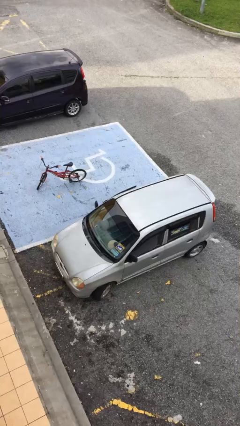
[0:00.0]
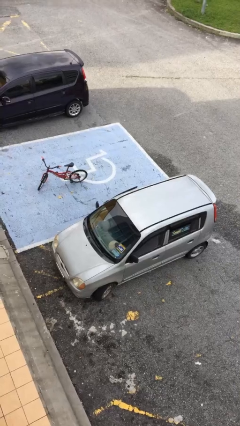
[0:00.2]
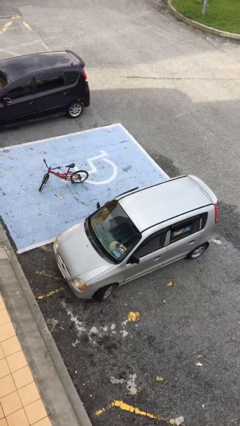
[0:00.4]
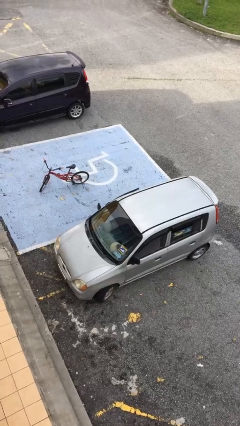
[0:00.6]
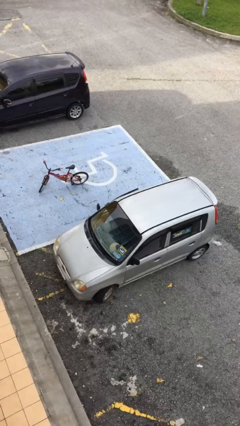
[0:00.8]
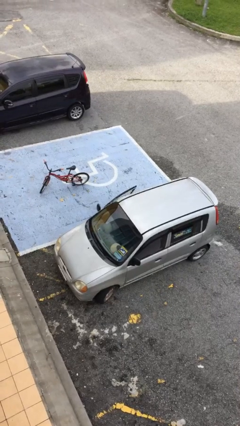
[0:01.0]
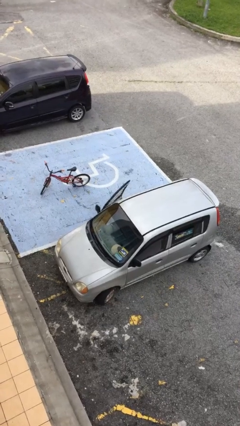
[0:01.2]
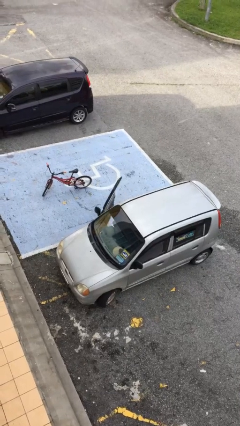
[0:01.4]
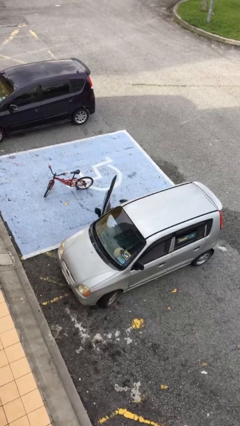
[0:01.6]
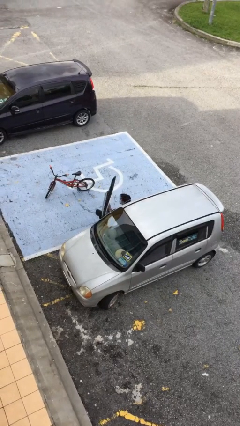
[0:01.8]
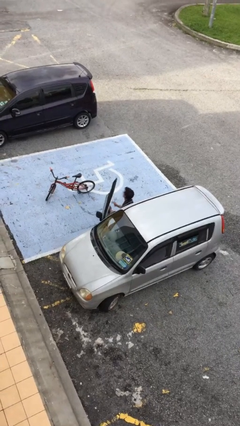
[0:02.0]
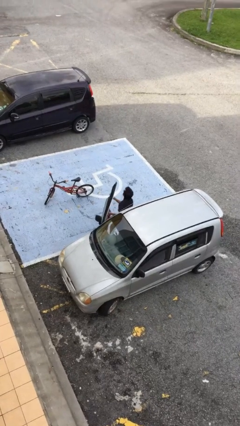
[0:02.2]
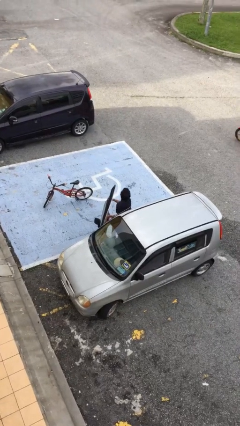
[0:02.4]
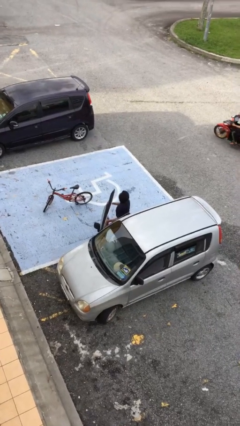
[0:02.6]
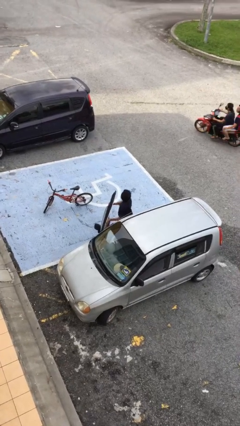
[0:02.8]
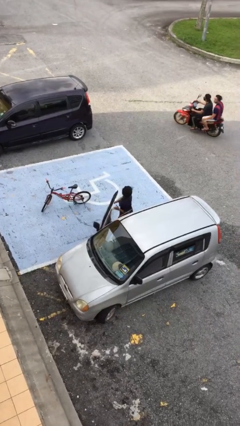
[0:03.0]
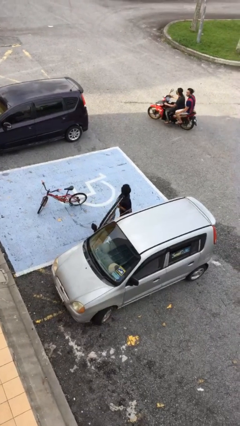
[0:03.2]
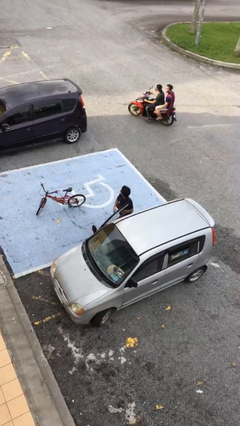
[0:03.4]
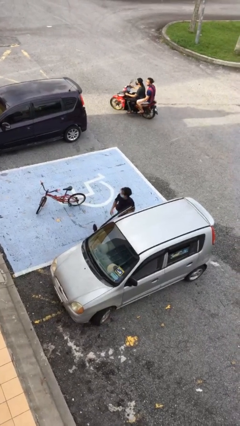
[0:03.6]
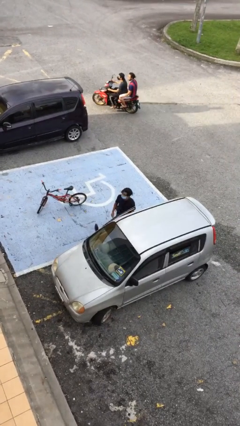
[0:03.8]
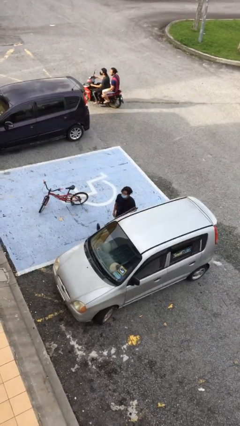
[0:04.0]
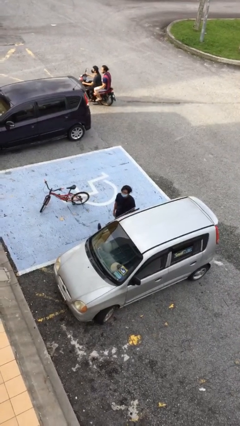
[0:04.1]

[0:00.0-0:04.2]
person exits car

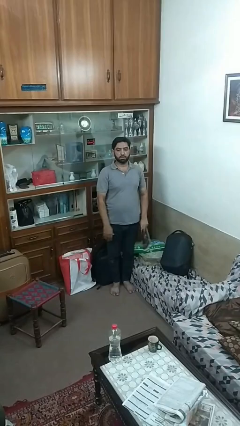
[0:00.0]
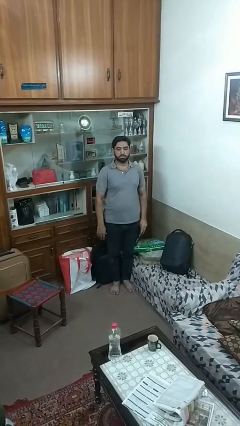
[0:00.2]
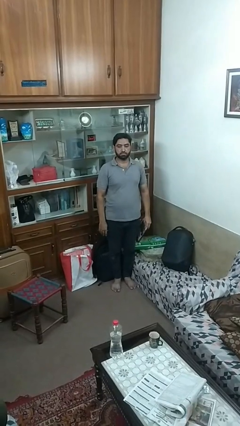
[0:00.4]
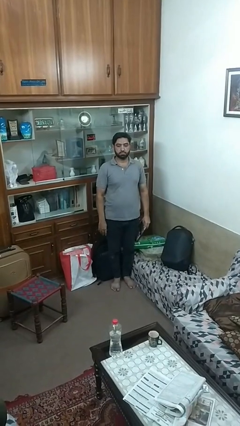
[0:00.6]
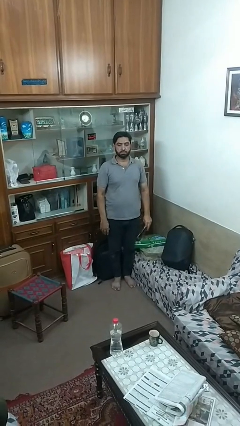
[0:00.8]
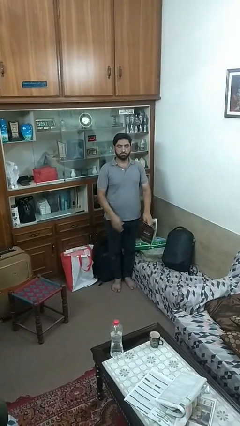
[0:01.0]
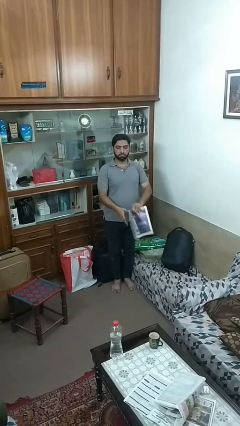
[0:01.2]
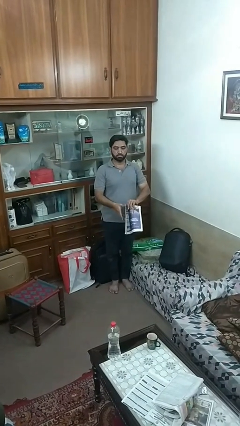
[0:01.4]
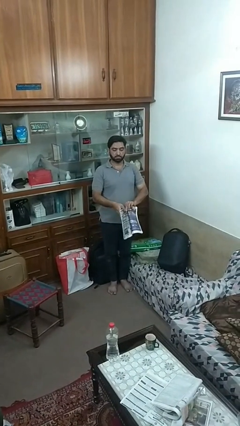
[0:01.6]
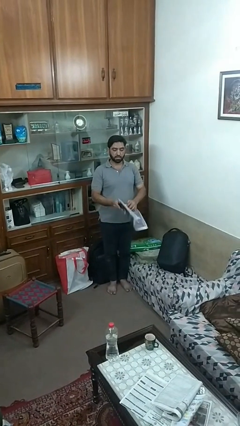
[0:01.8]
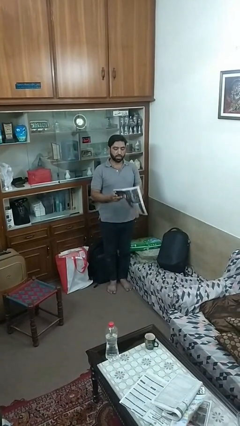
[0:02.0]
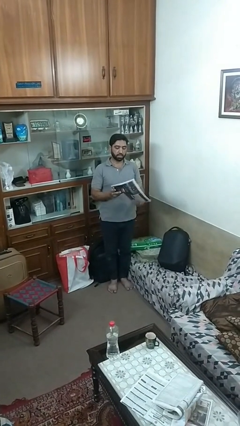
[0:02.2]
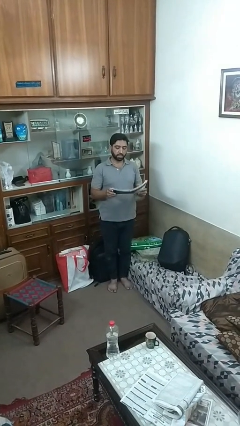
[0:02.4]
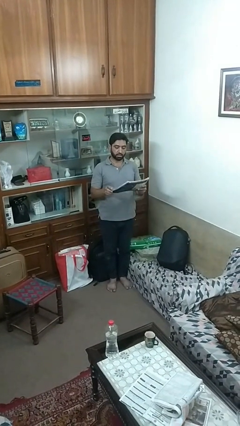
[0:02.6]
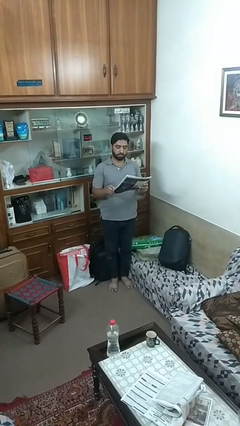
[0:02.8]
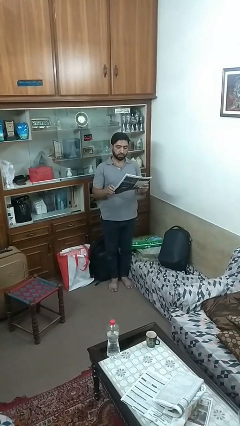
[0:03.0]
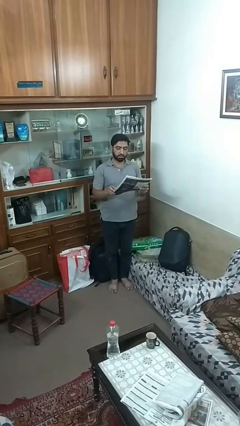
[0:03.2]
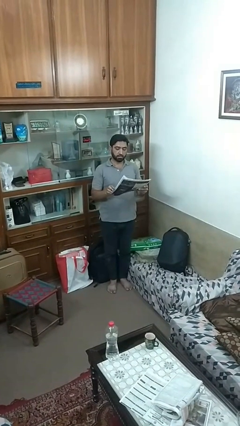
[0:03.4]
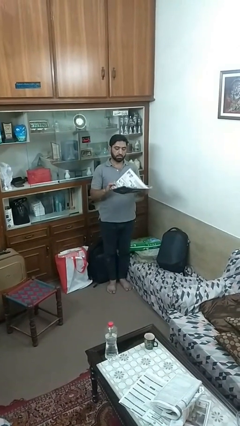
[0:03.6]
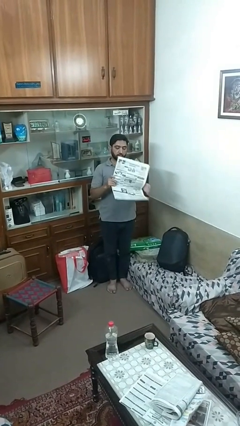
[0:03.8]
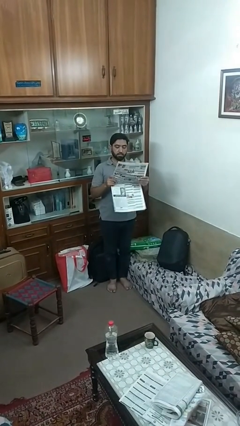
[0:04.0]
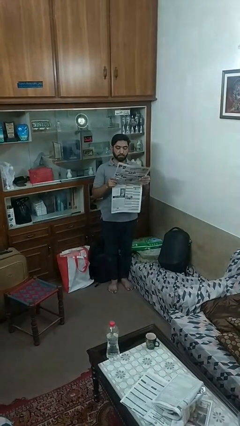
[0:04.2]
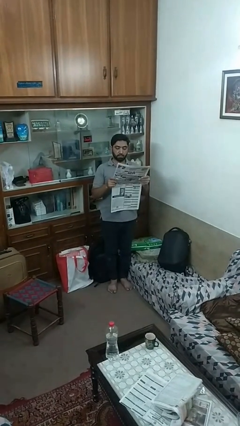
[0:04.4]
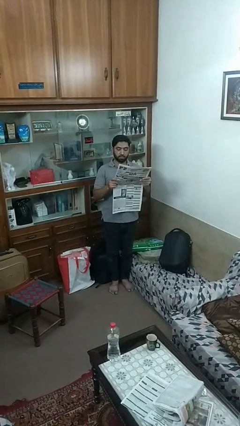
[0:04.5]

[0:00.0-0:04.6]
person reads newspaper

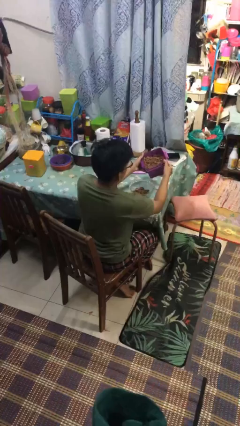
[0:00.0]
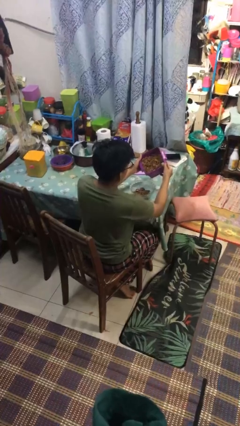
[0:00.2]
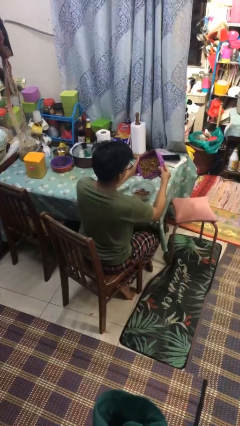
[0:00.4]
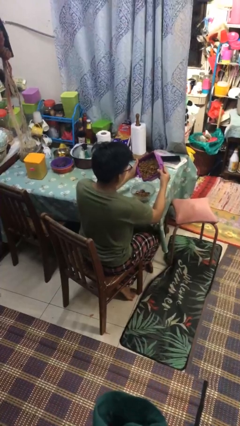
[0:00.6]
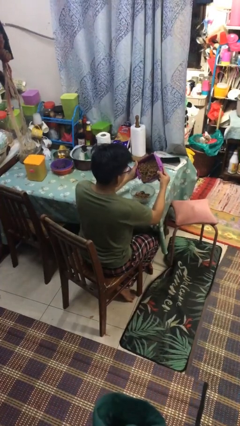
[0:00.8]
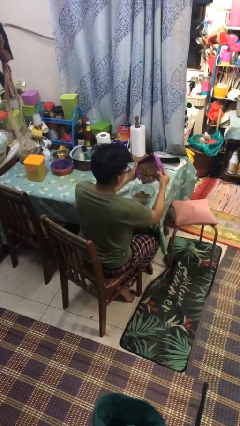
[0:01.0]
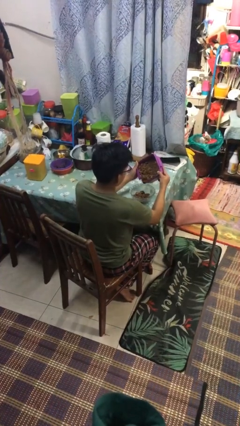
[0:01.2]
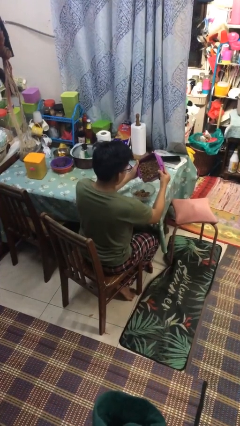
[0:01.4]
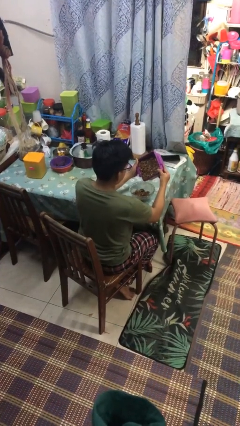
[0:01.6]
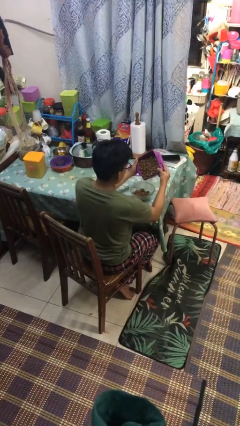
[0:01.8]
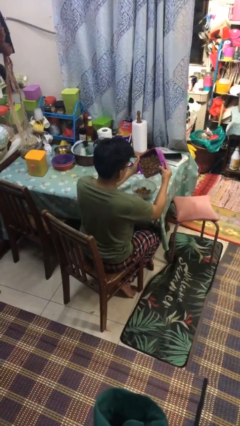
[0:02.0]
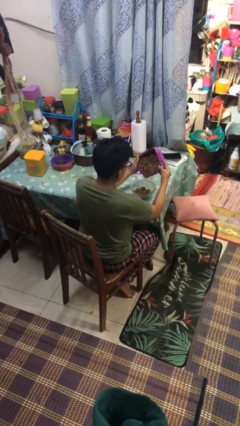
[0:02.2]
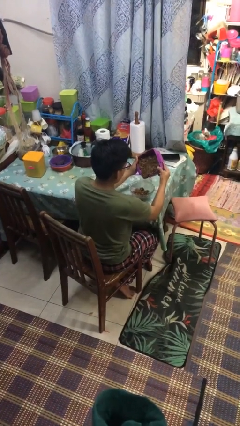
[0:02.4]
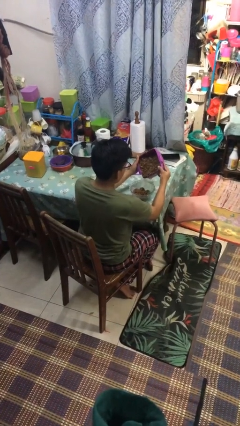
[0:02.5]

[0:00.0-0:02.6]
person pours into bowl

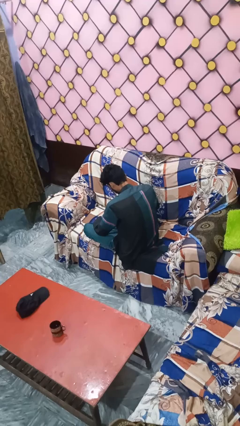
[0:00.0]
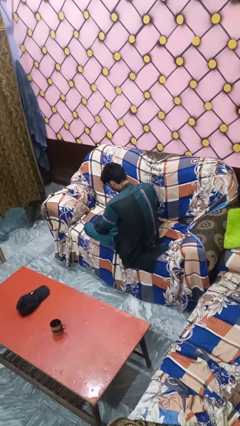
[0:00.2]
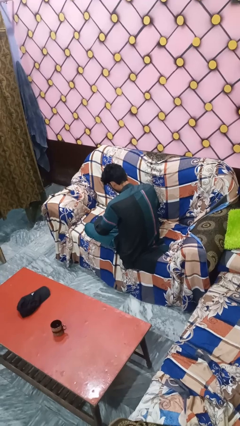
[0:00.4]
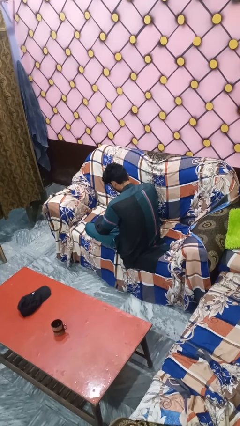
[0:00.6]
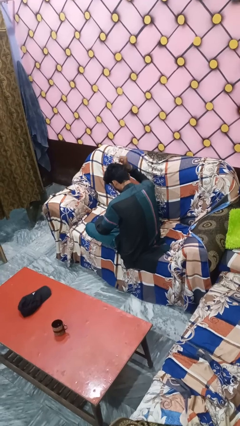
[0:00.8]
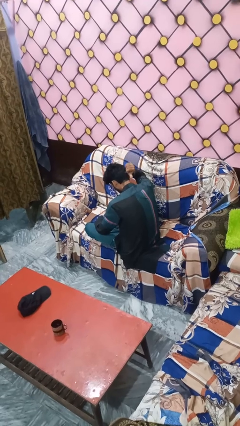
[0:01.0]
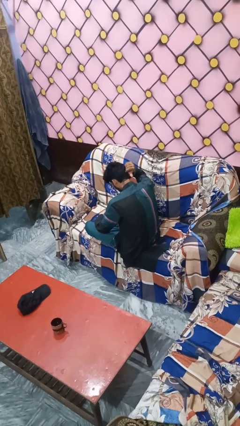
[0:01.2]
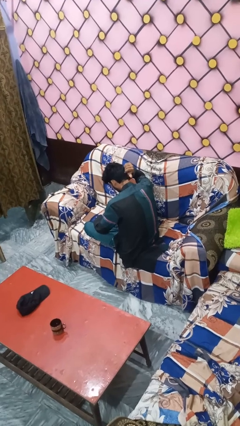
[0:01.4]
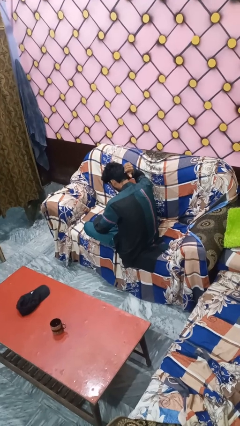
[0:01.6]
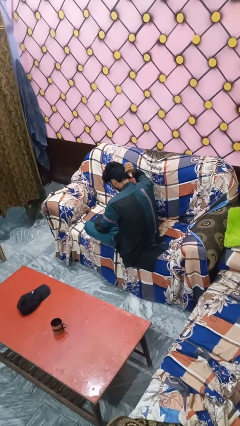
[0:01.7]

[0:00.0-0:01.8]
person gestures behind me

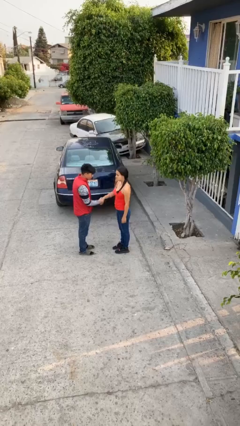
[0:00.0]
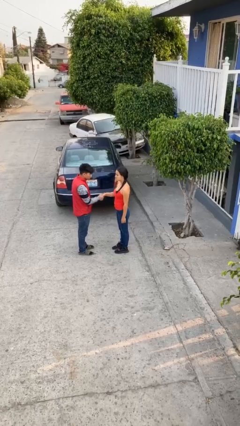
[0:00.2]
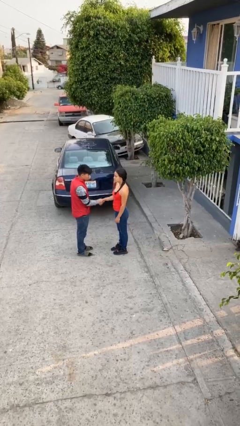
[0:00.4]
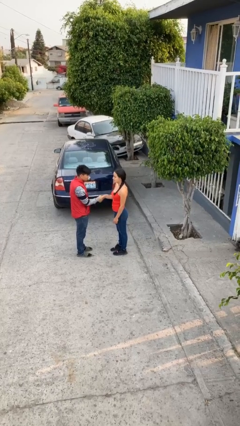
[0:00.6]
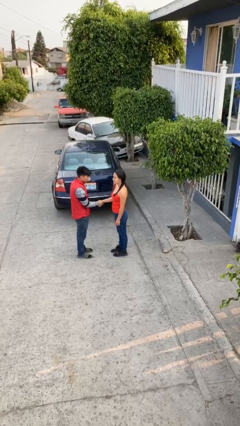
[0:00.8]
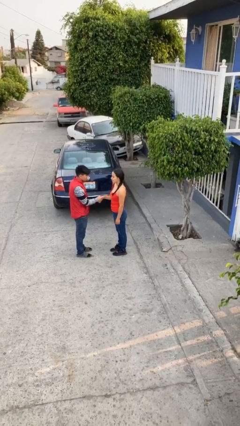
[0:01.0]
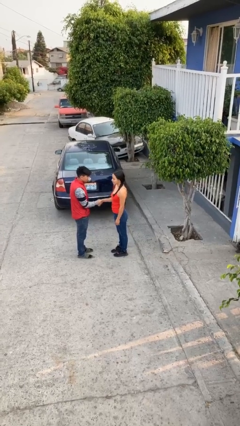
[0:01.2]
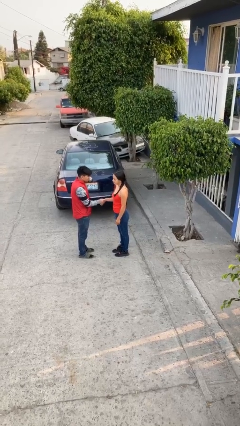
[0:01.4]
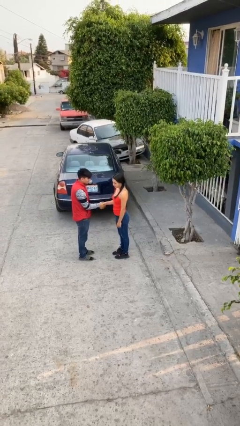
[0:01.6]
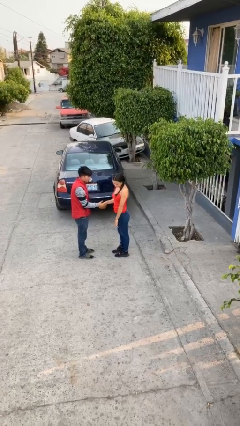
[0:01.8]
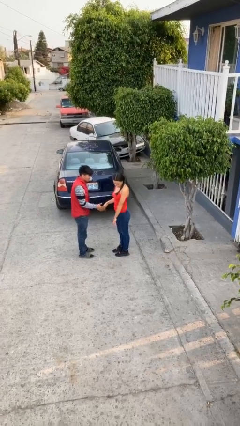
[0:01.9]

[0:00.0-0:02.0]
person shakes hand

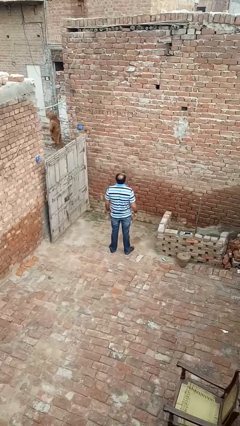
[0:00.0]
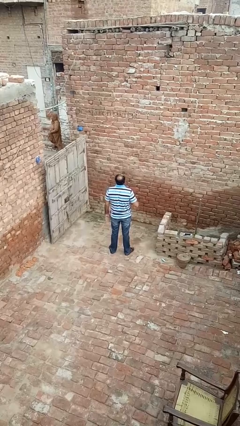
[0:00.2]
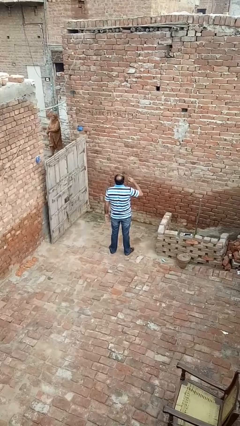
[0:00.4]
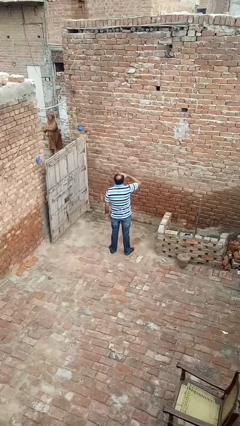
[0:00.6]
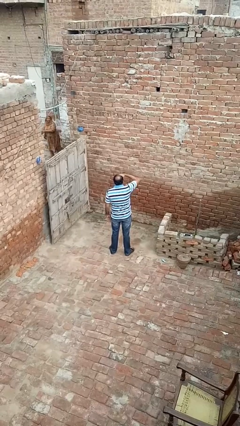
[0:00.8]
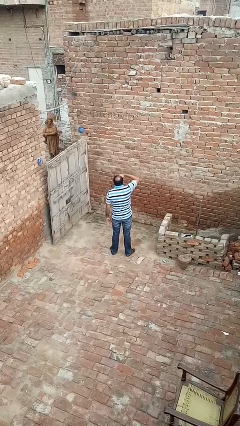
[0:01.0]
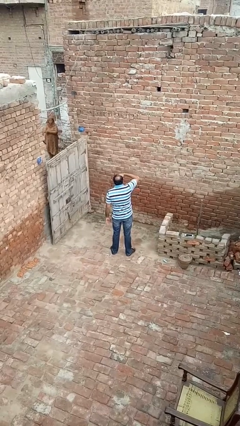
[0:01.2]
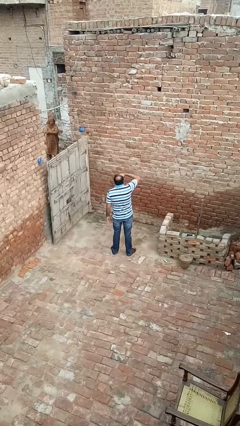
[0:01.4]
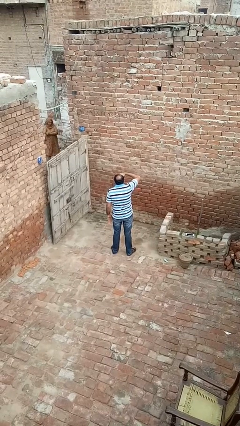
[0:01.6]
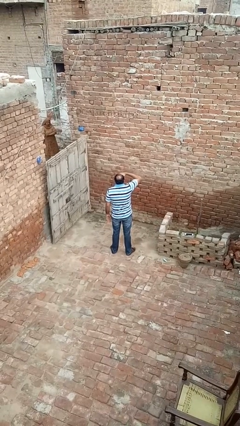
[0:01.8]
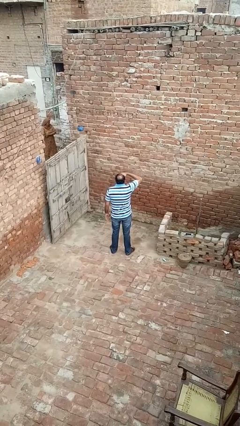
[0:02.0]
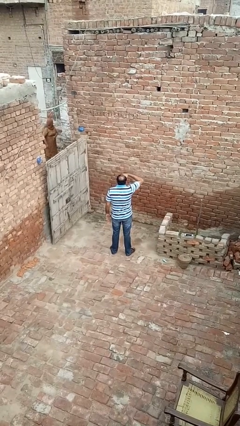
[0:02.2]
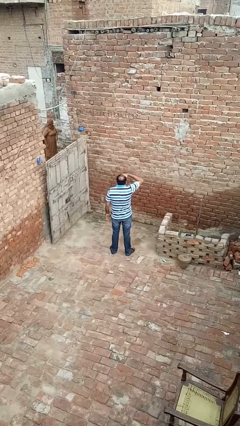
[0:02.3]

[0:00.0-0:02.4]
person shades eyes
